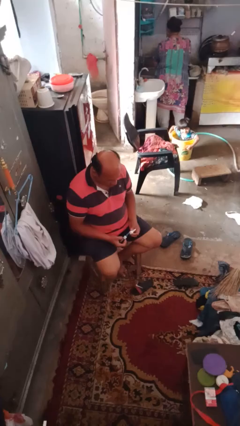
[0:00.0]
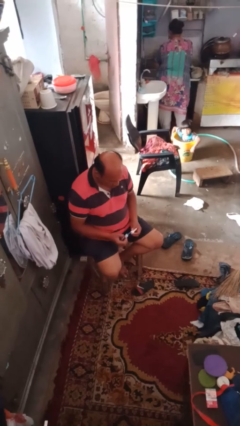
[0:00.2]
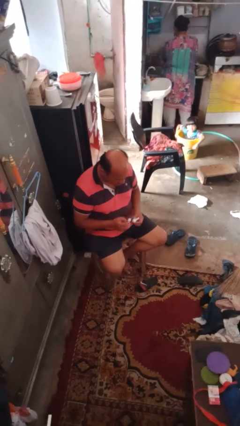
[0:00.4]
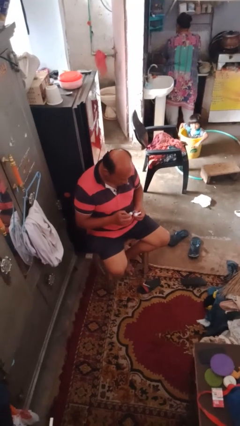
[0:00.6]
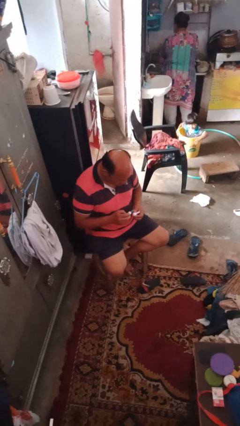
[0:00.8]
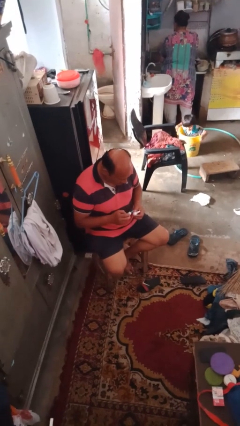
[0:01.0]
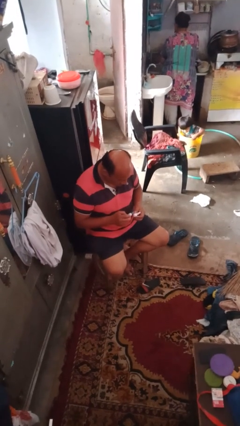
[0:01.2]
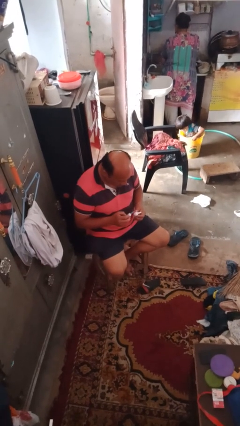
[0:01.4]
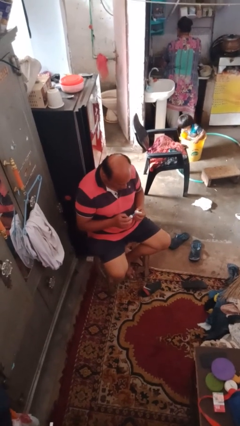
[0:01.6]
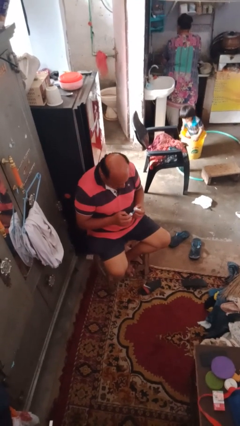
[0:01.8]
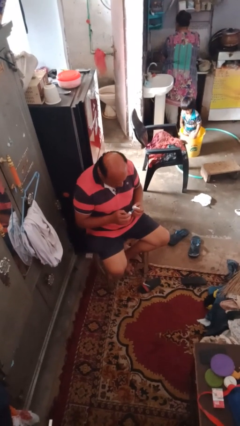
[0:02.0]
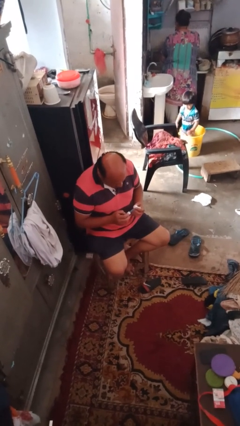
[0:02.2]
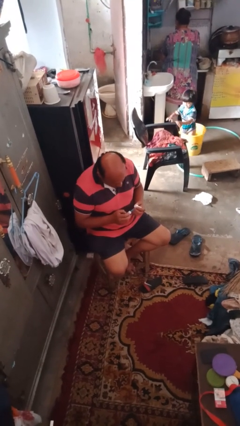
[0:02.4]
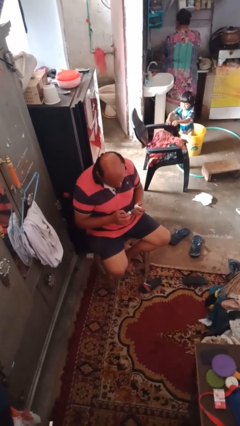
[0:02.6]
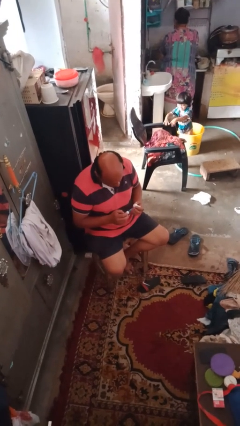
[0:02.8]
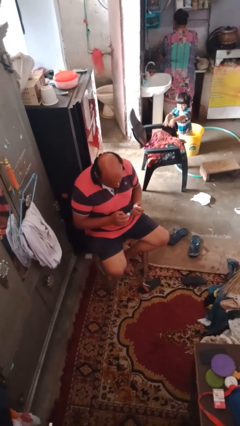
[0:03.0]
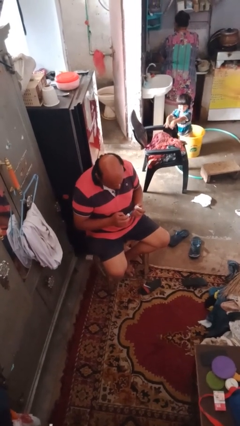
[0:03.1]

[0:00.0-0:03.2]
person paints fingernails

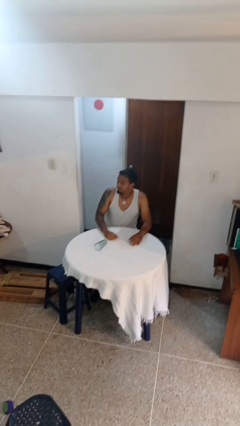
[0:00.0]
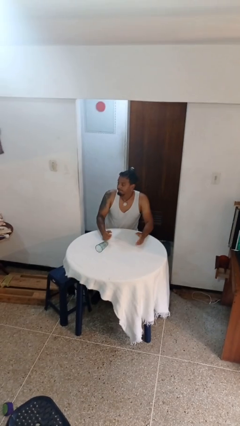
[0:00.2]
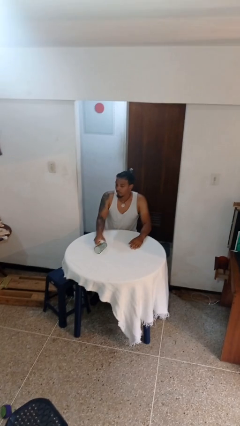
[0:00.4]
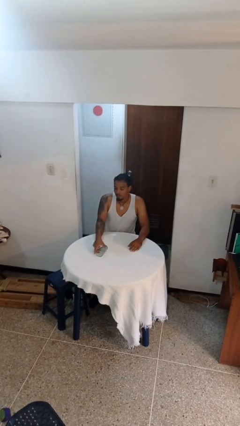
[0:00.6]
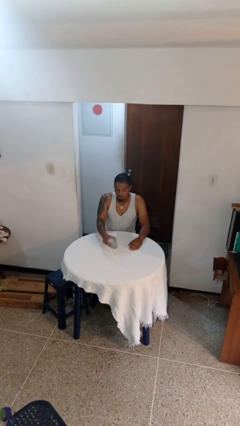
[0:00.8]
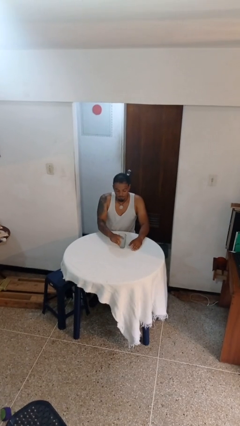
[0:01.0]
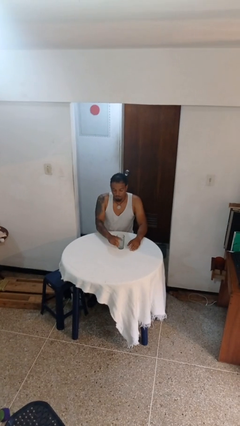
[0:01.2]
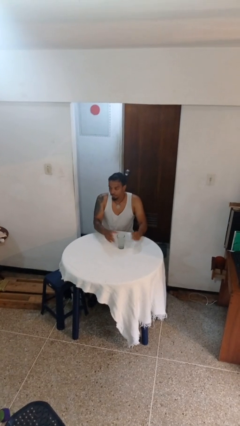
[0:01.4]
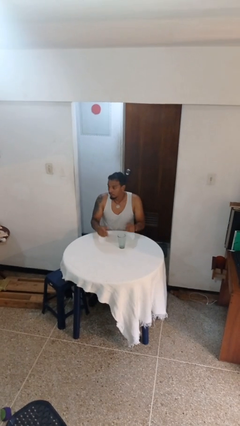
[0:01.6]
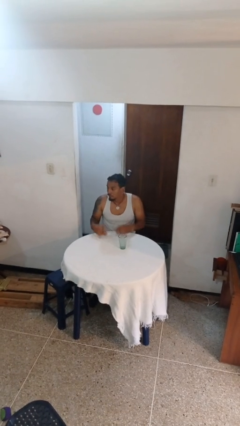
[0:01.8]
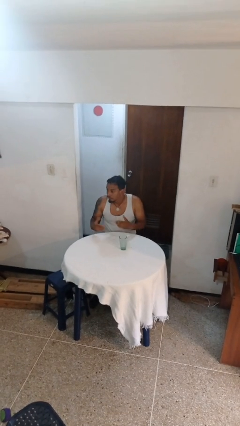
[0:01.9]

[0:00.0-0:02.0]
person sets upright glass

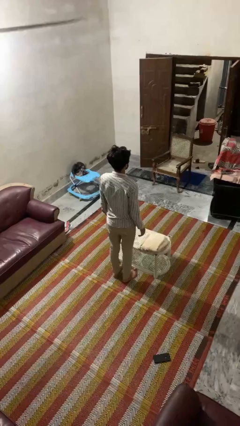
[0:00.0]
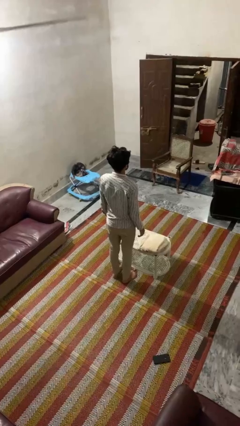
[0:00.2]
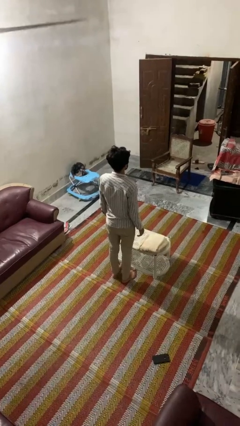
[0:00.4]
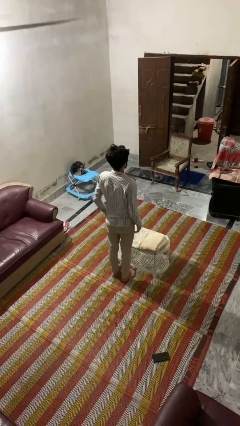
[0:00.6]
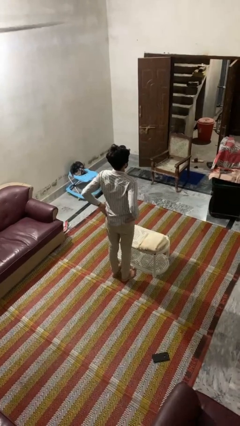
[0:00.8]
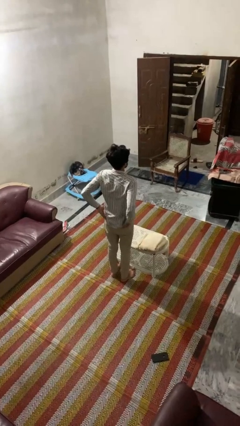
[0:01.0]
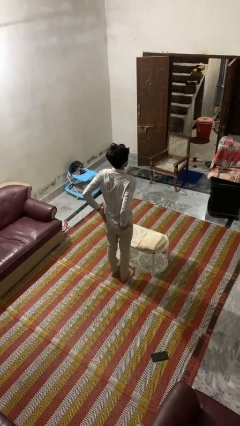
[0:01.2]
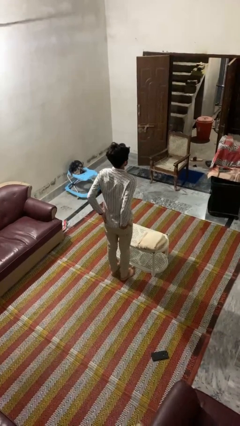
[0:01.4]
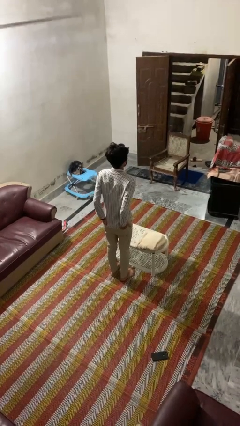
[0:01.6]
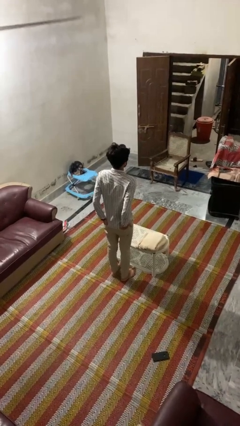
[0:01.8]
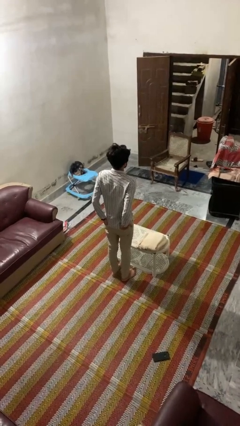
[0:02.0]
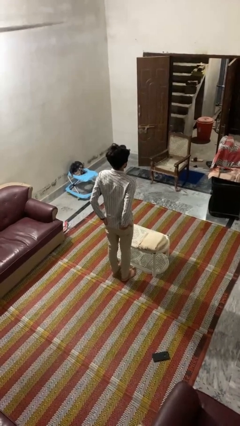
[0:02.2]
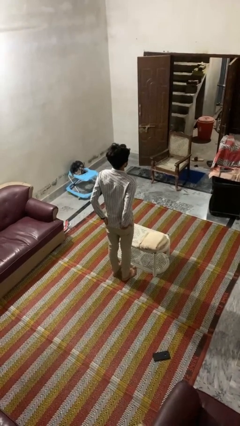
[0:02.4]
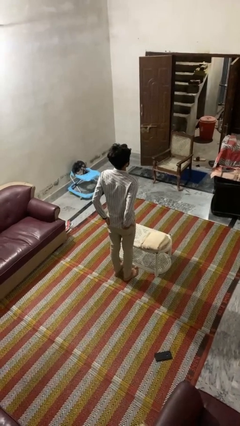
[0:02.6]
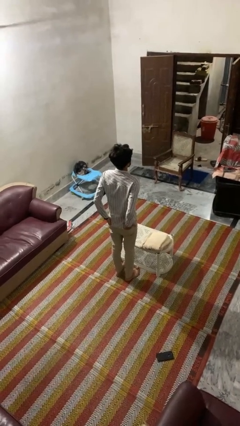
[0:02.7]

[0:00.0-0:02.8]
person puts hands in back pockets

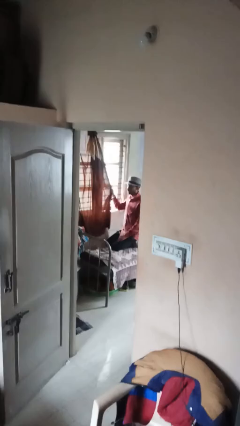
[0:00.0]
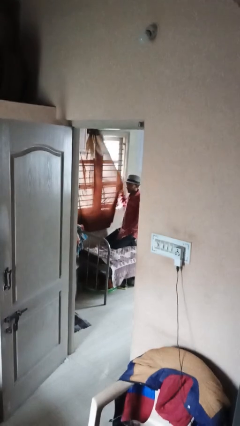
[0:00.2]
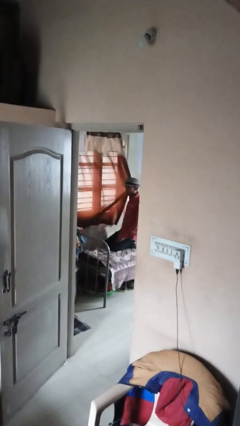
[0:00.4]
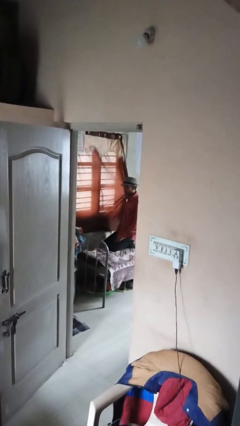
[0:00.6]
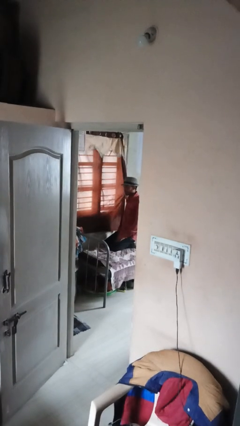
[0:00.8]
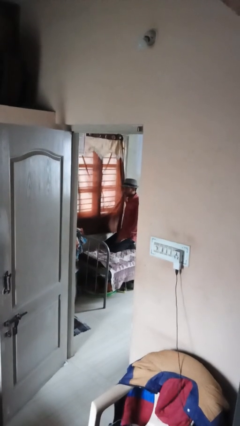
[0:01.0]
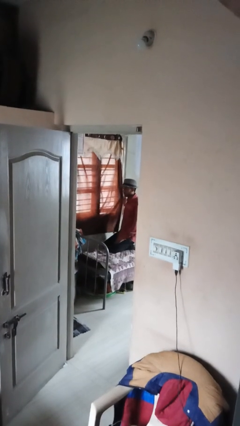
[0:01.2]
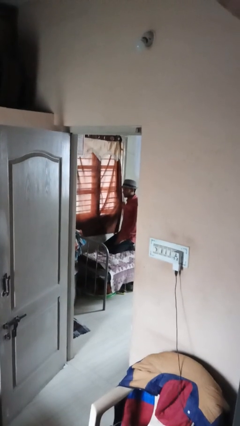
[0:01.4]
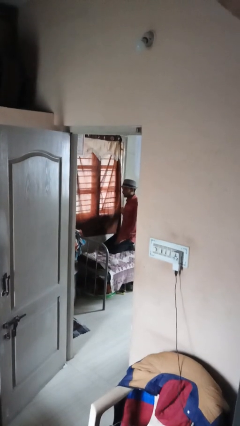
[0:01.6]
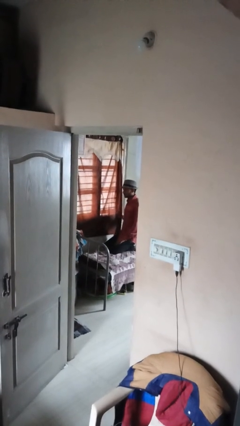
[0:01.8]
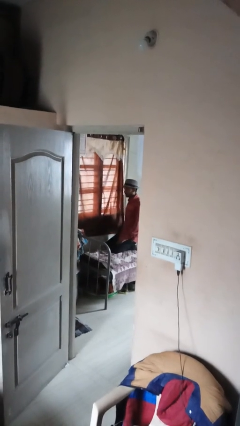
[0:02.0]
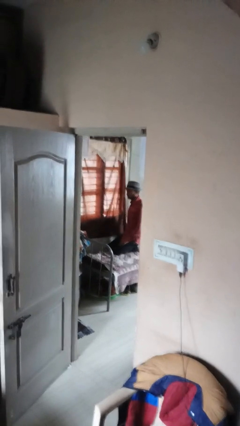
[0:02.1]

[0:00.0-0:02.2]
person closes curtains

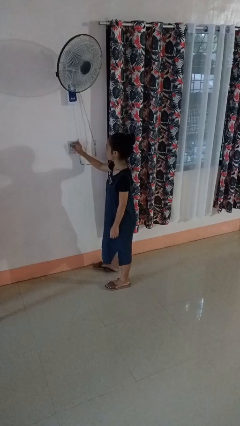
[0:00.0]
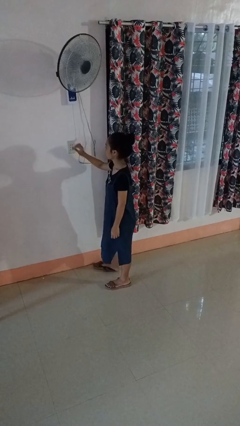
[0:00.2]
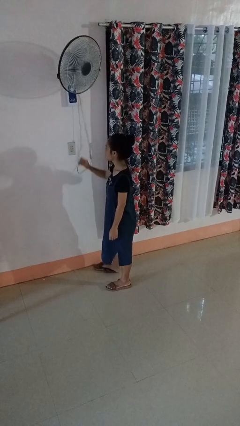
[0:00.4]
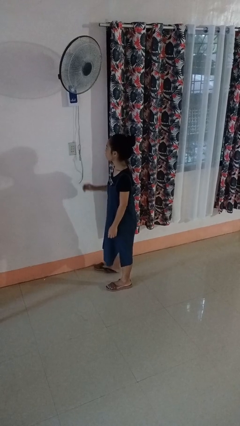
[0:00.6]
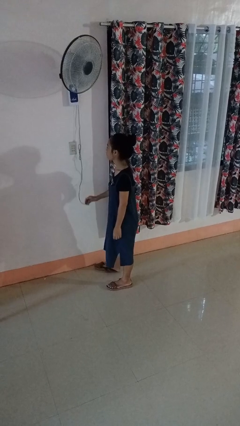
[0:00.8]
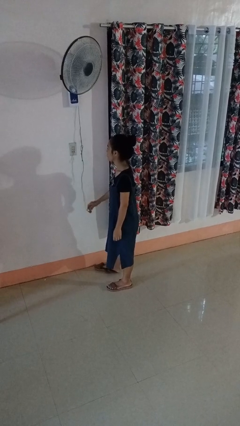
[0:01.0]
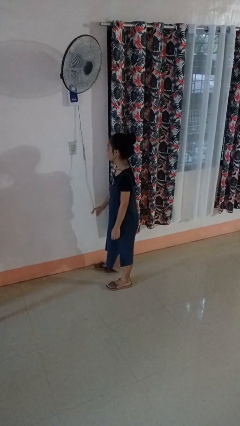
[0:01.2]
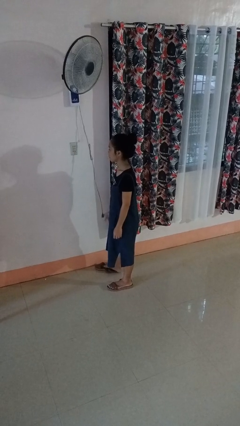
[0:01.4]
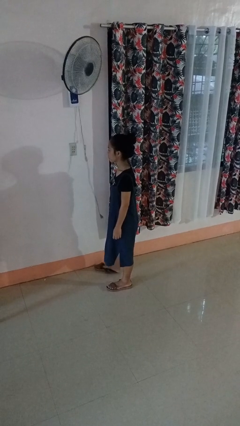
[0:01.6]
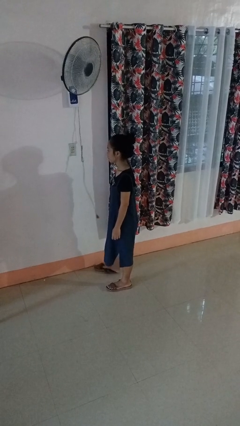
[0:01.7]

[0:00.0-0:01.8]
person unplugs from electrical socket

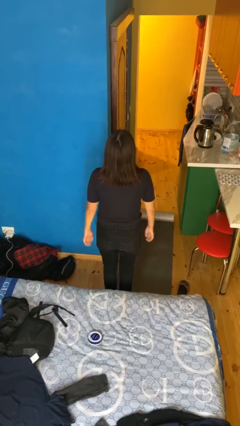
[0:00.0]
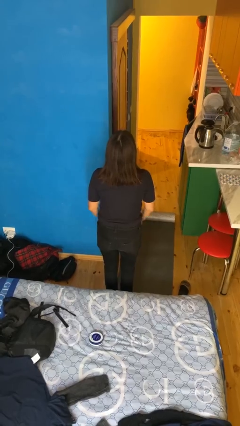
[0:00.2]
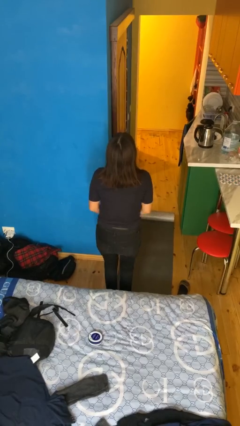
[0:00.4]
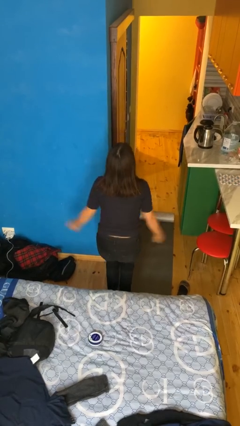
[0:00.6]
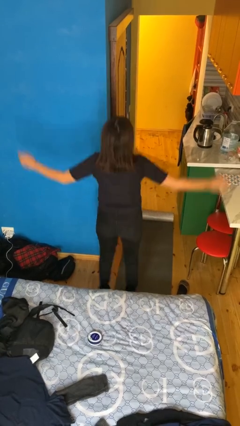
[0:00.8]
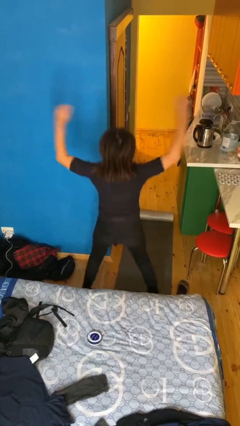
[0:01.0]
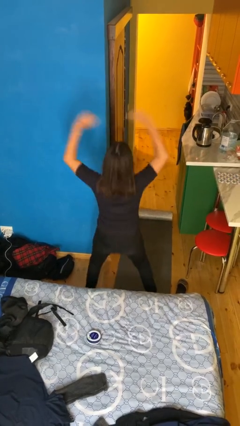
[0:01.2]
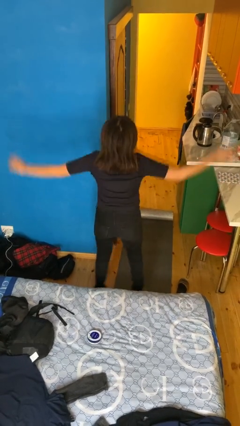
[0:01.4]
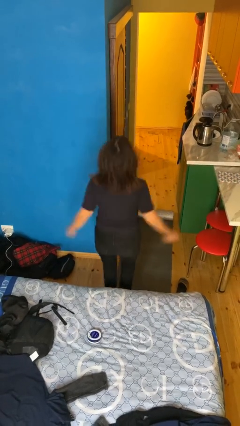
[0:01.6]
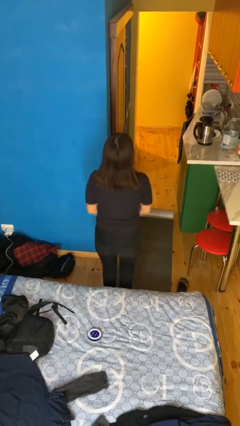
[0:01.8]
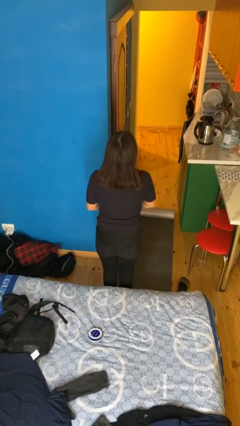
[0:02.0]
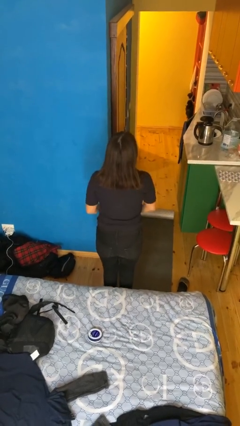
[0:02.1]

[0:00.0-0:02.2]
person exercises with jumping jacks

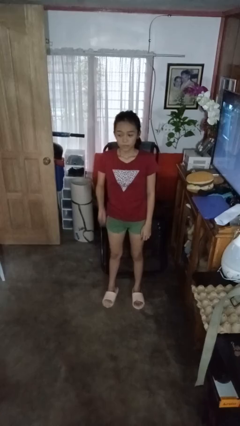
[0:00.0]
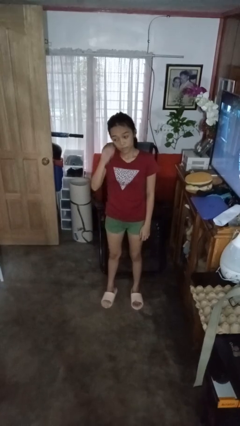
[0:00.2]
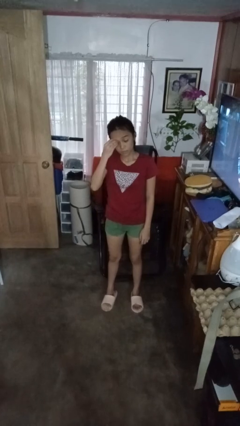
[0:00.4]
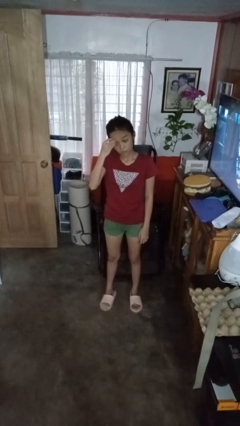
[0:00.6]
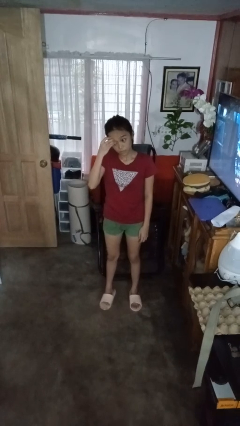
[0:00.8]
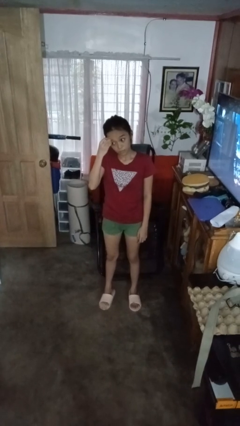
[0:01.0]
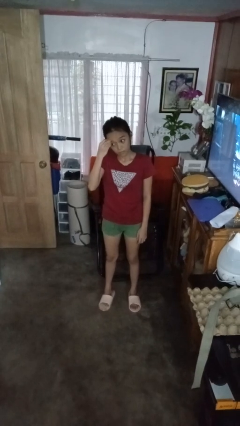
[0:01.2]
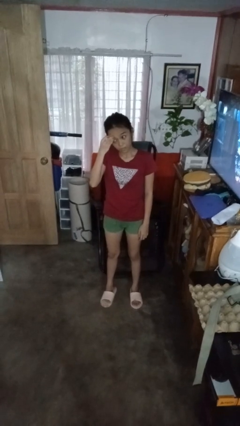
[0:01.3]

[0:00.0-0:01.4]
person scratches face

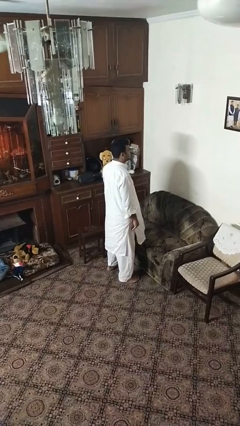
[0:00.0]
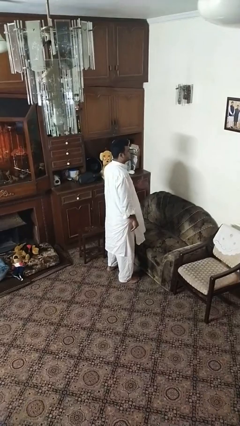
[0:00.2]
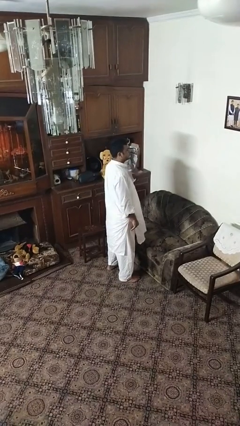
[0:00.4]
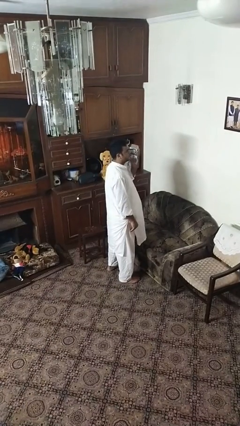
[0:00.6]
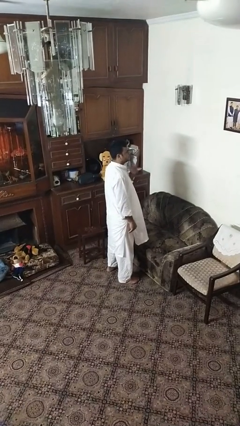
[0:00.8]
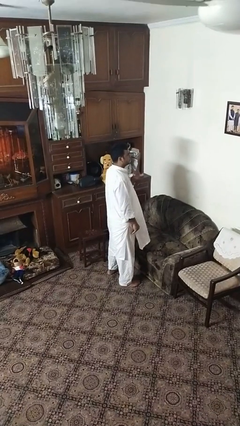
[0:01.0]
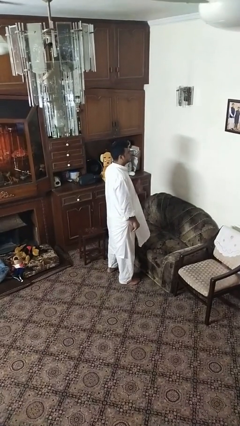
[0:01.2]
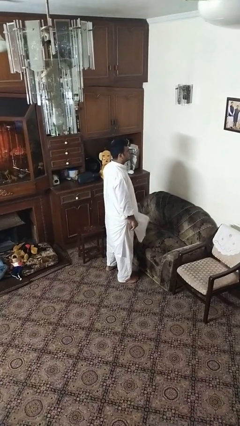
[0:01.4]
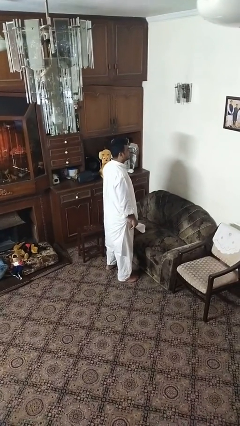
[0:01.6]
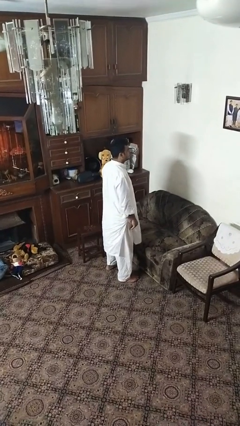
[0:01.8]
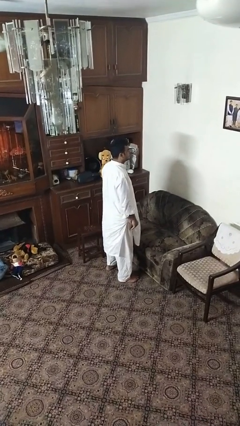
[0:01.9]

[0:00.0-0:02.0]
person gestures cut
